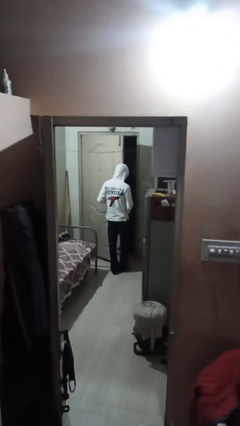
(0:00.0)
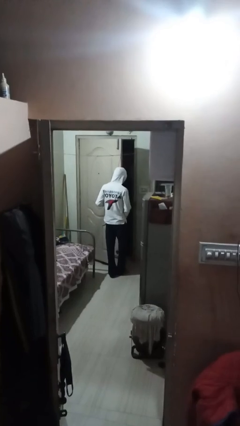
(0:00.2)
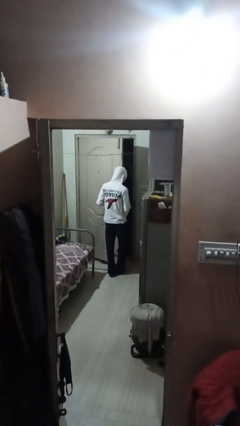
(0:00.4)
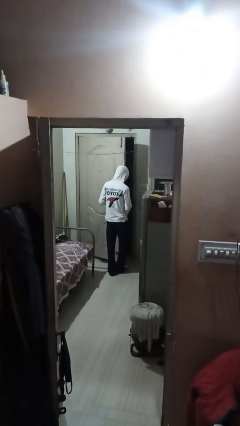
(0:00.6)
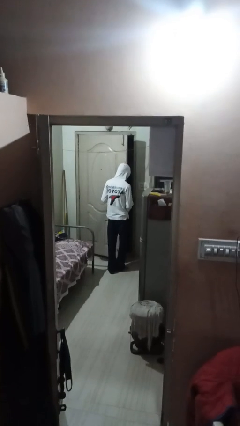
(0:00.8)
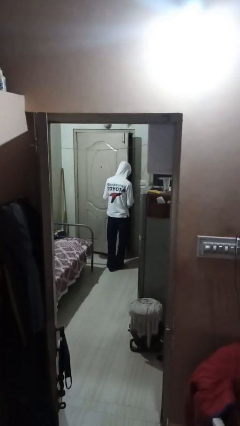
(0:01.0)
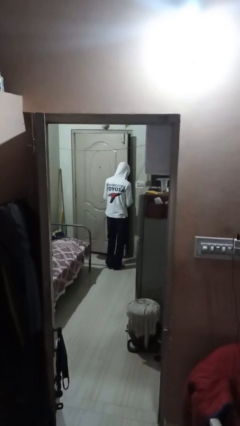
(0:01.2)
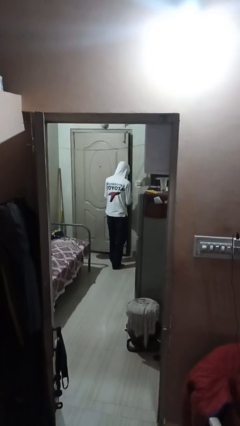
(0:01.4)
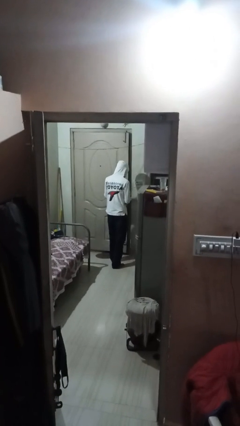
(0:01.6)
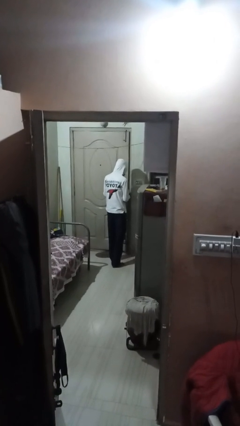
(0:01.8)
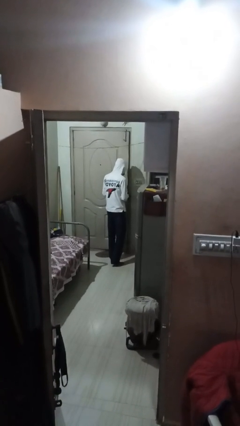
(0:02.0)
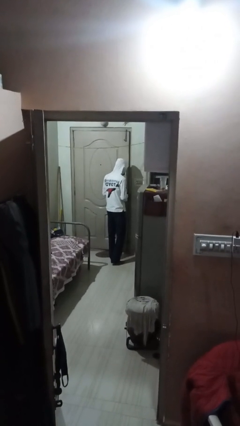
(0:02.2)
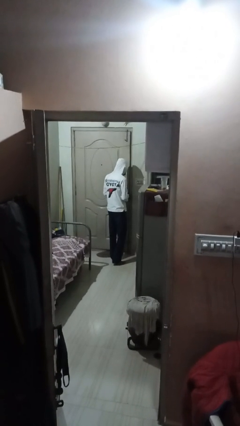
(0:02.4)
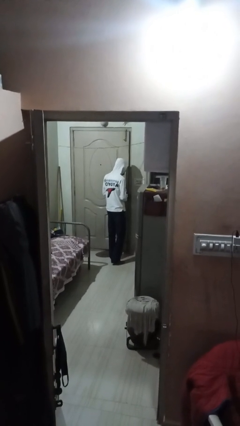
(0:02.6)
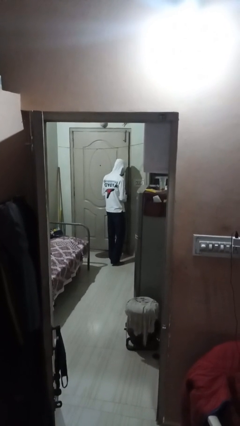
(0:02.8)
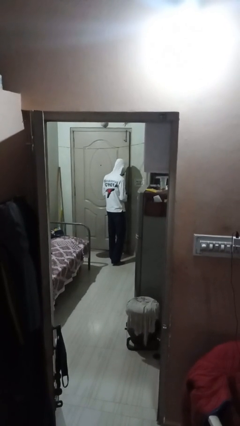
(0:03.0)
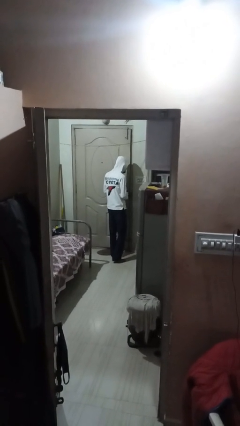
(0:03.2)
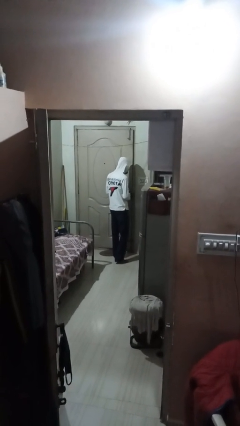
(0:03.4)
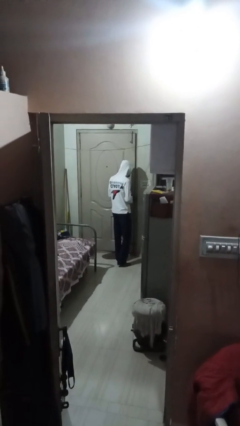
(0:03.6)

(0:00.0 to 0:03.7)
person closes facility door

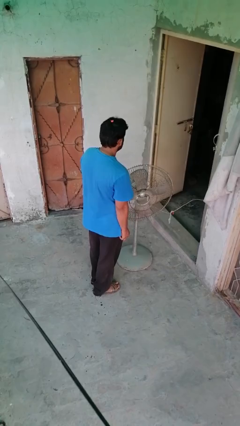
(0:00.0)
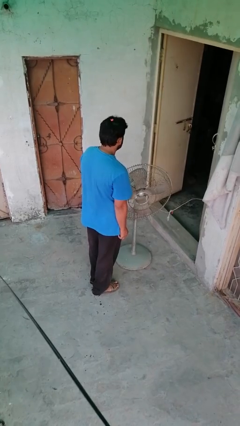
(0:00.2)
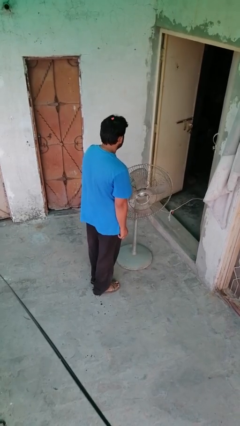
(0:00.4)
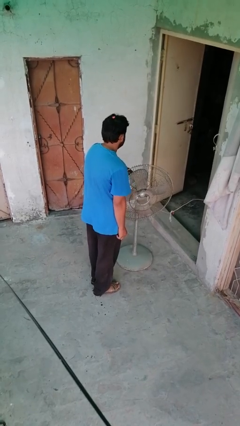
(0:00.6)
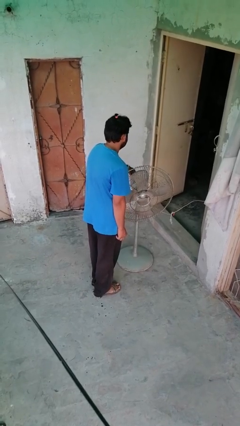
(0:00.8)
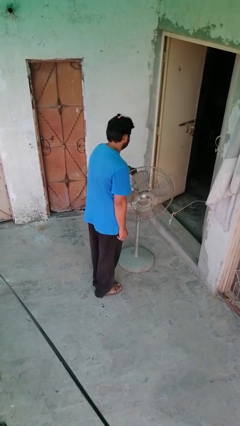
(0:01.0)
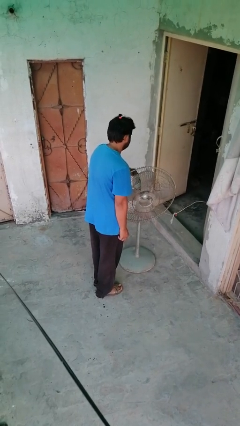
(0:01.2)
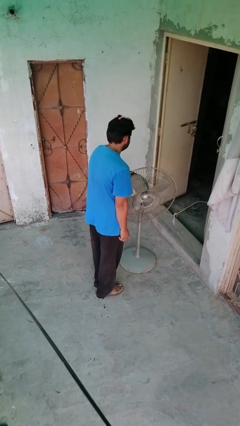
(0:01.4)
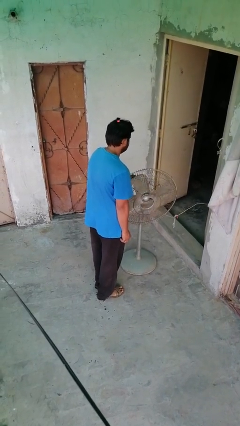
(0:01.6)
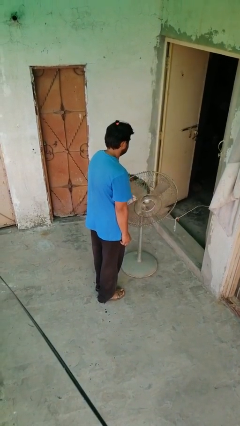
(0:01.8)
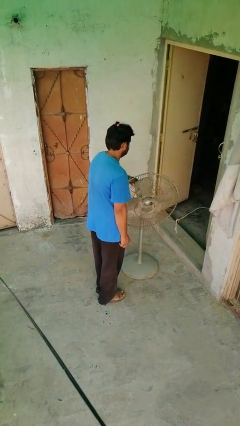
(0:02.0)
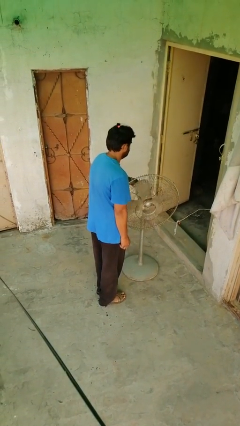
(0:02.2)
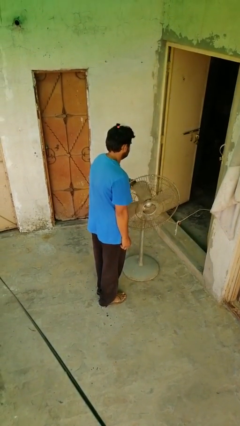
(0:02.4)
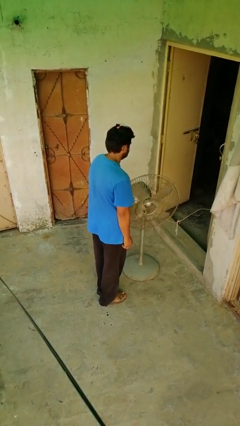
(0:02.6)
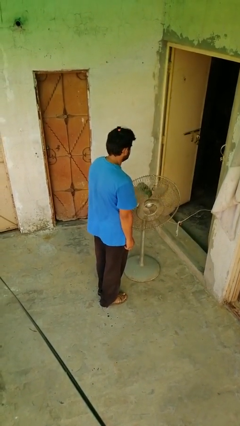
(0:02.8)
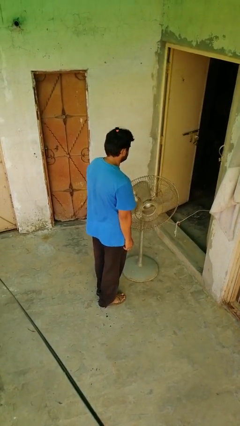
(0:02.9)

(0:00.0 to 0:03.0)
person turns on fan

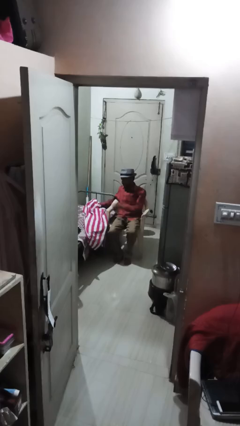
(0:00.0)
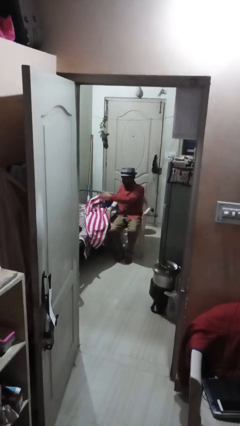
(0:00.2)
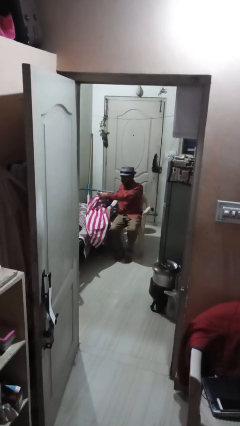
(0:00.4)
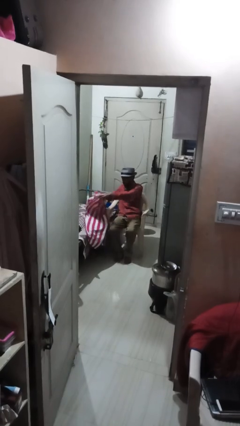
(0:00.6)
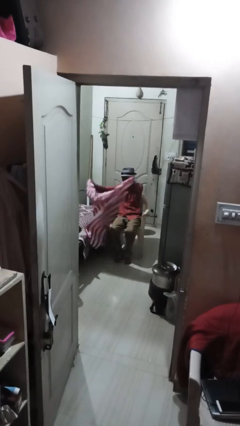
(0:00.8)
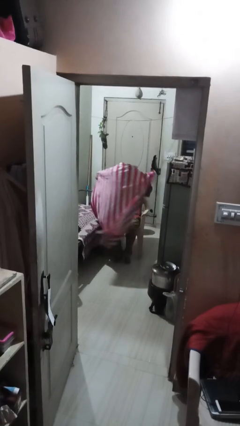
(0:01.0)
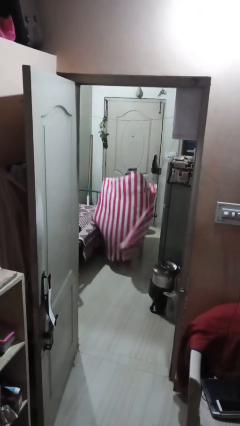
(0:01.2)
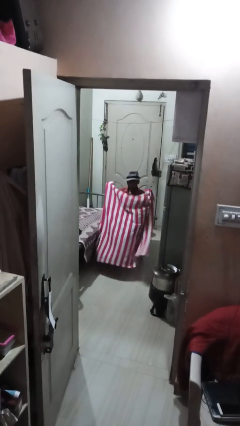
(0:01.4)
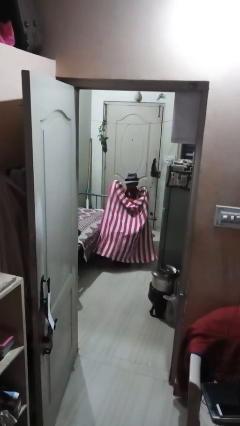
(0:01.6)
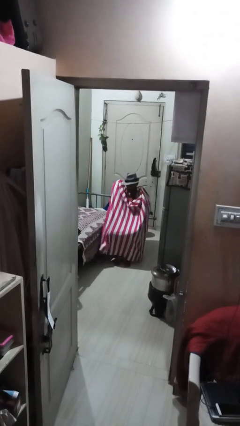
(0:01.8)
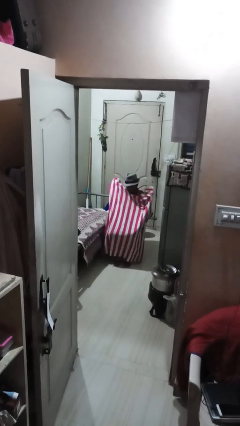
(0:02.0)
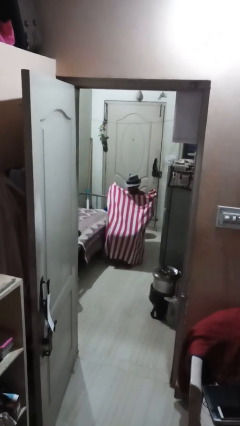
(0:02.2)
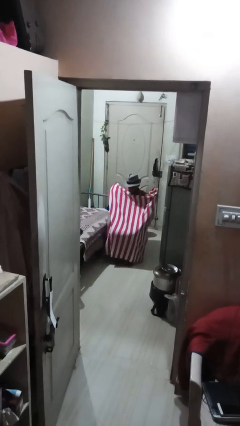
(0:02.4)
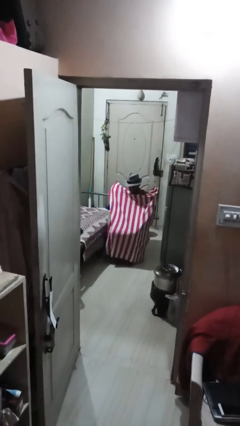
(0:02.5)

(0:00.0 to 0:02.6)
person covers with blanket

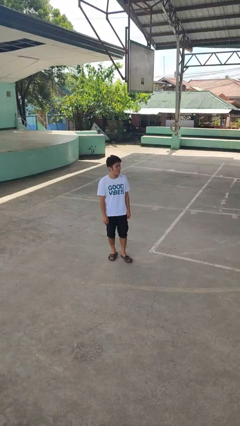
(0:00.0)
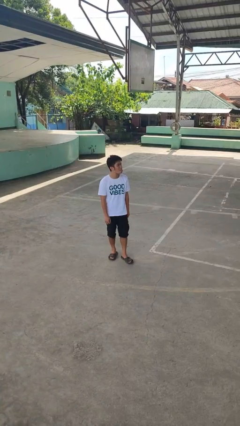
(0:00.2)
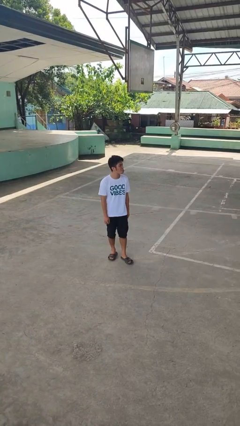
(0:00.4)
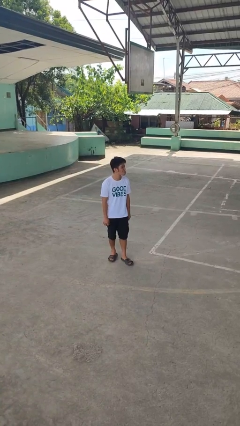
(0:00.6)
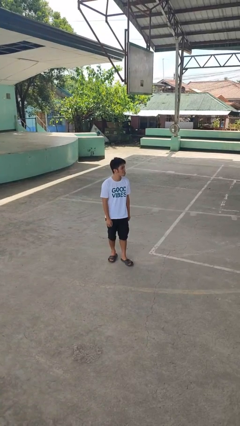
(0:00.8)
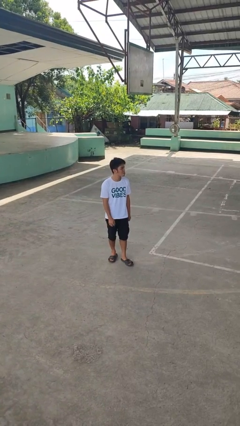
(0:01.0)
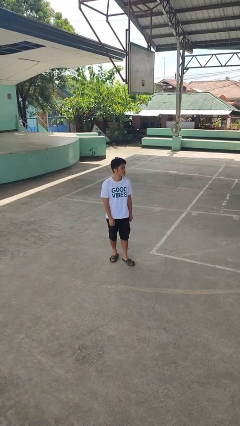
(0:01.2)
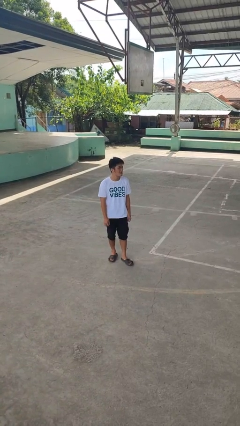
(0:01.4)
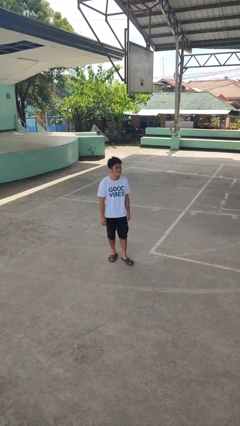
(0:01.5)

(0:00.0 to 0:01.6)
person sticks out tongue

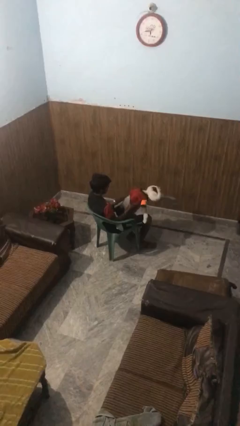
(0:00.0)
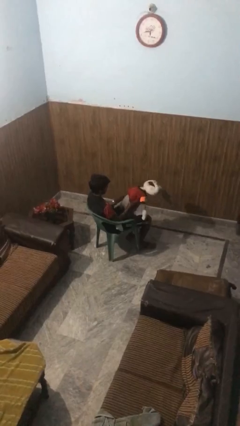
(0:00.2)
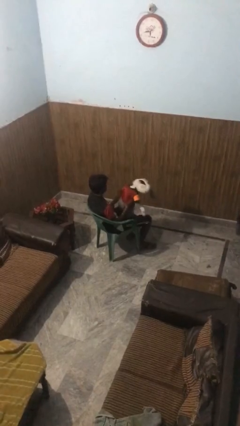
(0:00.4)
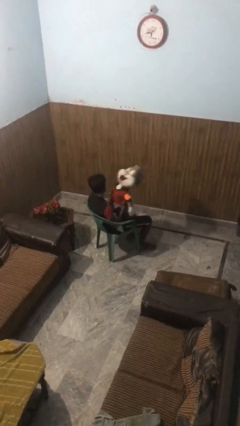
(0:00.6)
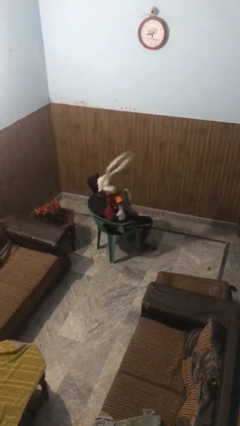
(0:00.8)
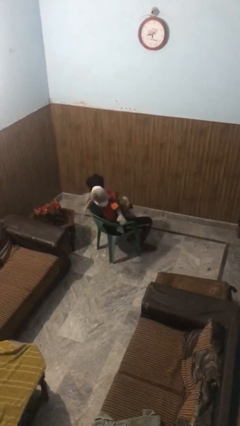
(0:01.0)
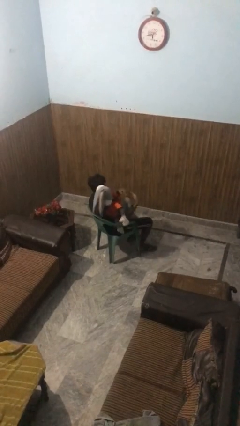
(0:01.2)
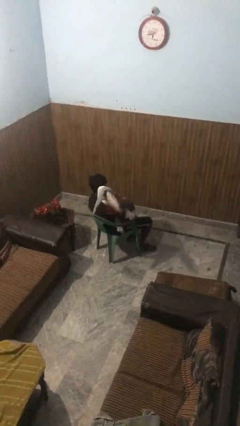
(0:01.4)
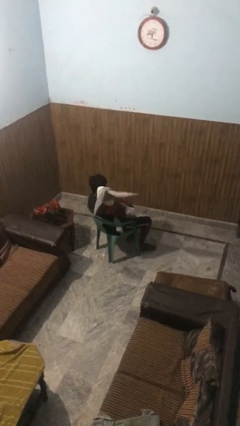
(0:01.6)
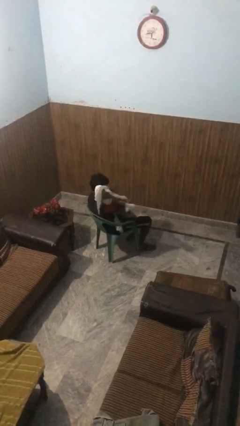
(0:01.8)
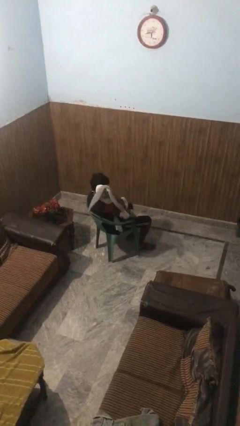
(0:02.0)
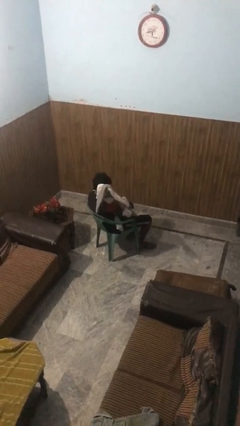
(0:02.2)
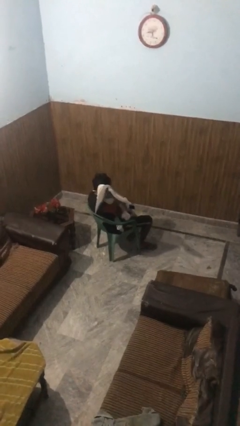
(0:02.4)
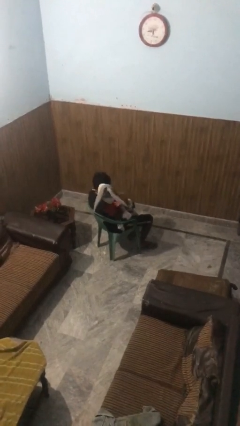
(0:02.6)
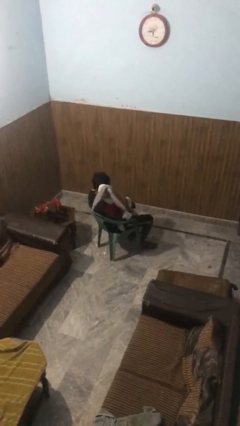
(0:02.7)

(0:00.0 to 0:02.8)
person hugs stuffed animal

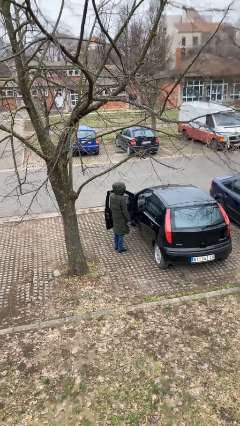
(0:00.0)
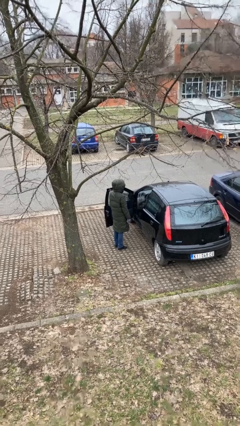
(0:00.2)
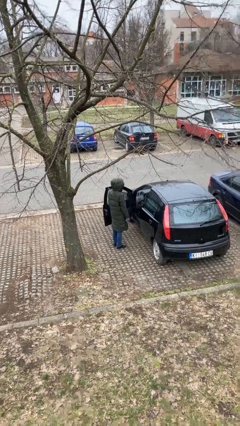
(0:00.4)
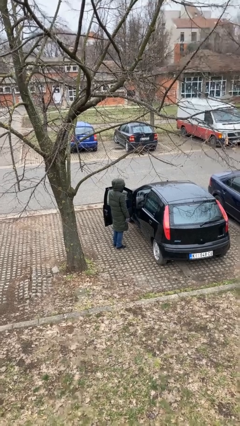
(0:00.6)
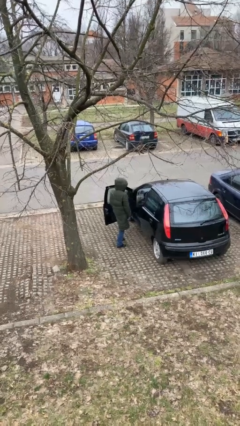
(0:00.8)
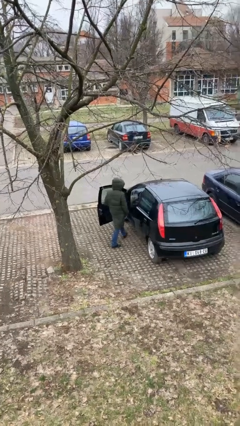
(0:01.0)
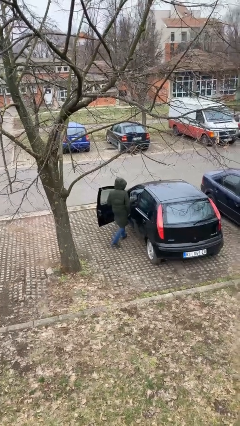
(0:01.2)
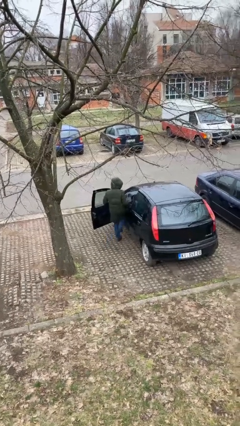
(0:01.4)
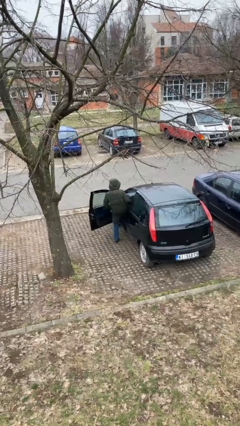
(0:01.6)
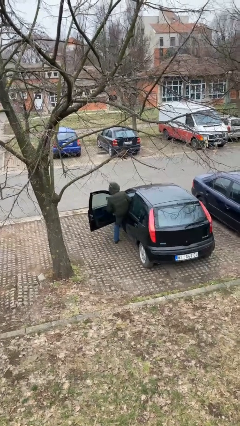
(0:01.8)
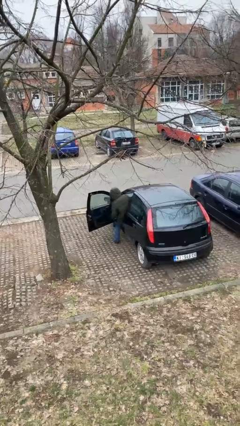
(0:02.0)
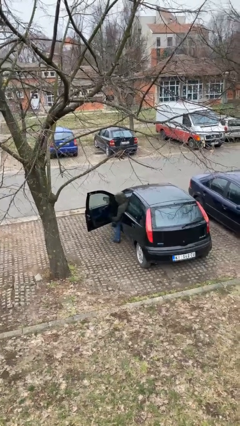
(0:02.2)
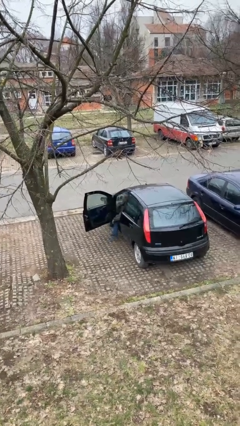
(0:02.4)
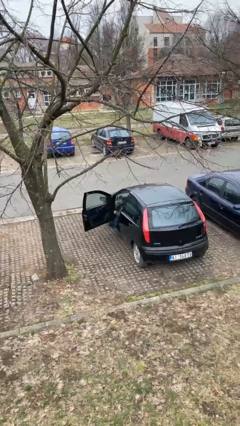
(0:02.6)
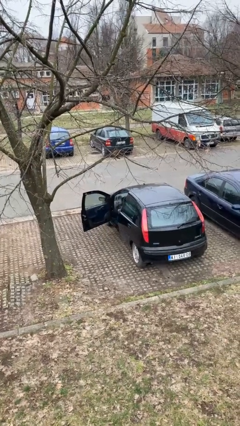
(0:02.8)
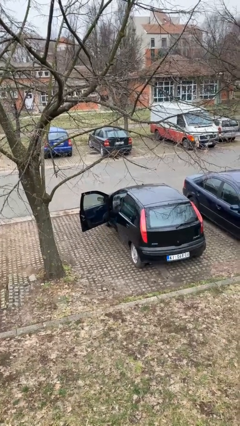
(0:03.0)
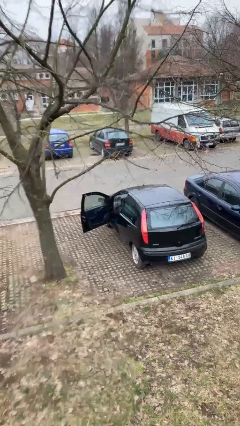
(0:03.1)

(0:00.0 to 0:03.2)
person enters car

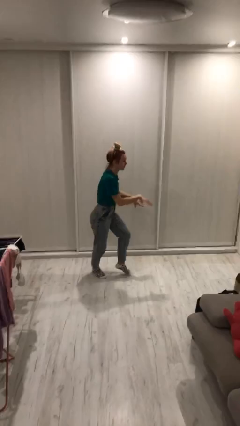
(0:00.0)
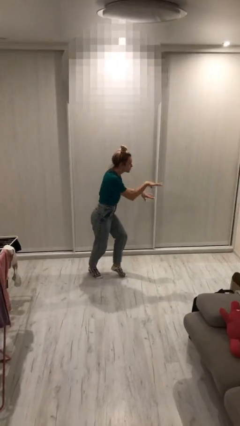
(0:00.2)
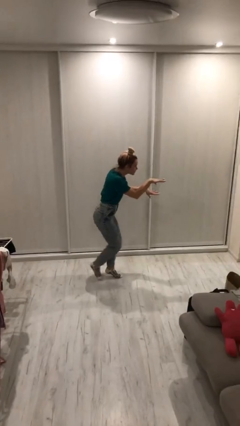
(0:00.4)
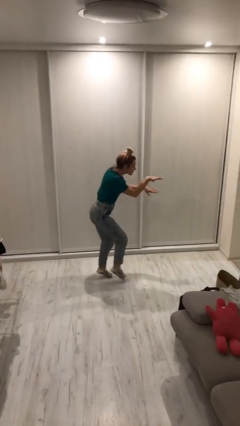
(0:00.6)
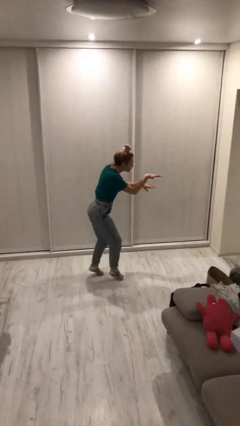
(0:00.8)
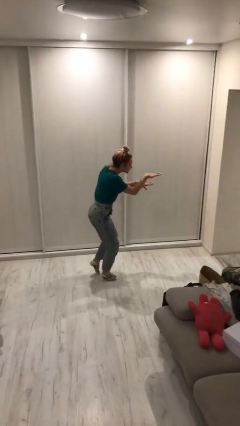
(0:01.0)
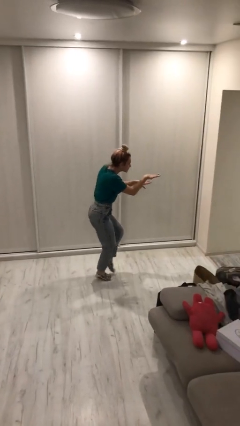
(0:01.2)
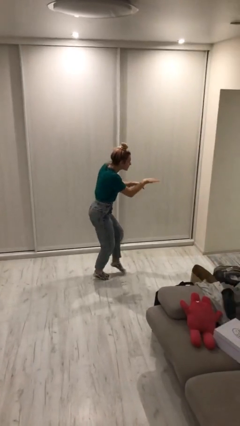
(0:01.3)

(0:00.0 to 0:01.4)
person walks tiptoe
